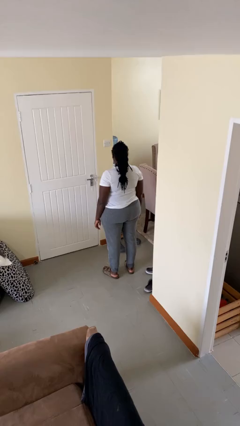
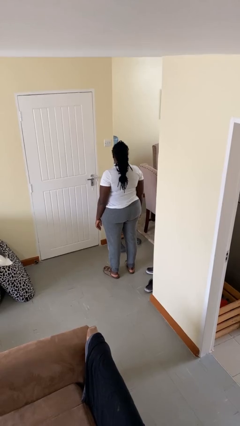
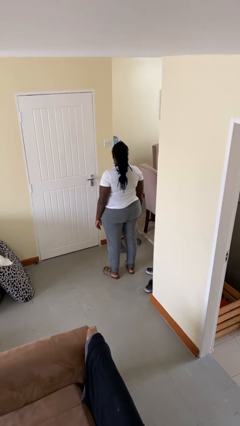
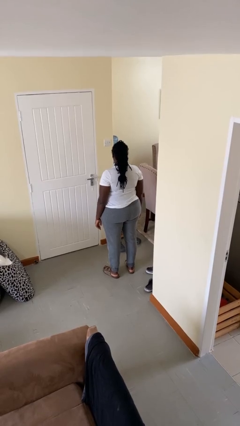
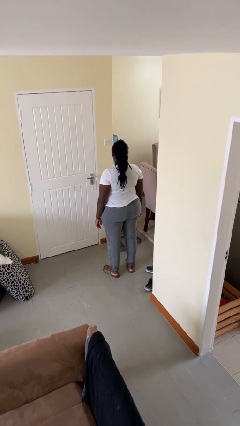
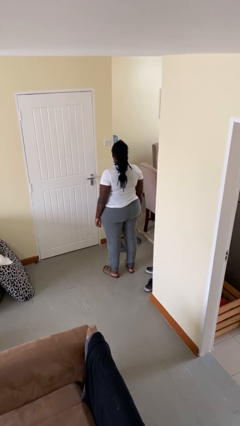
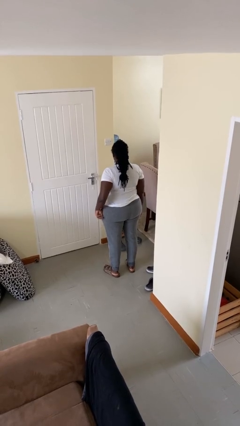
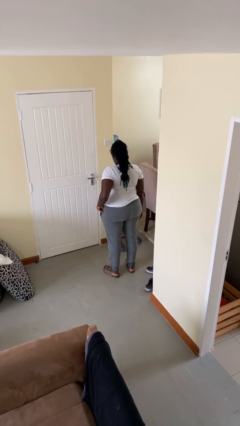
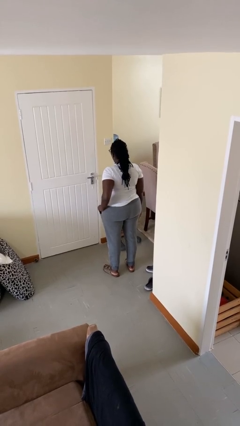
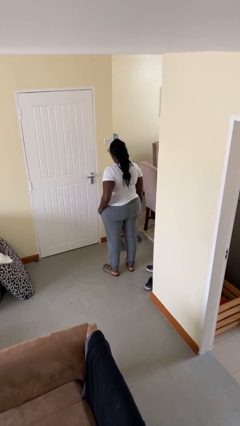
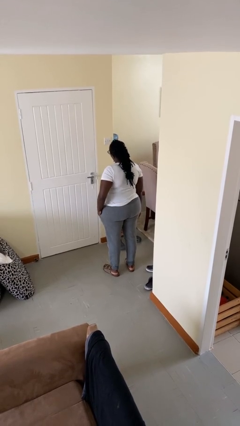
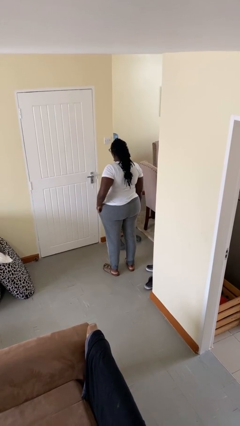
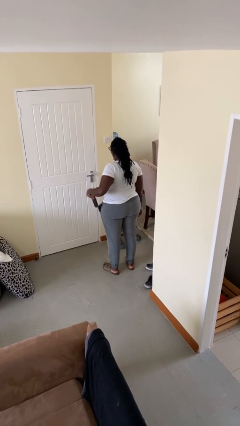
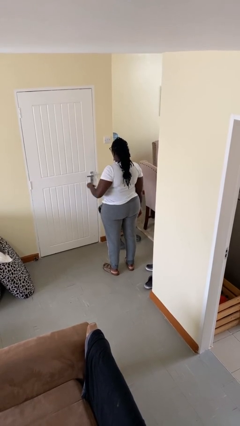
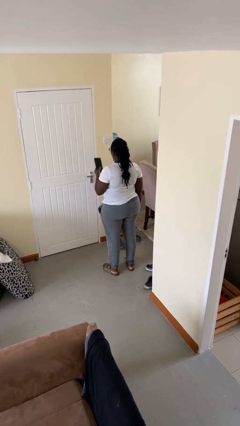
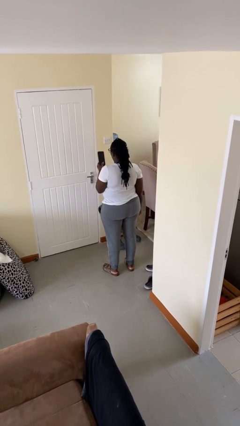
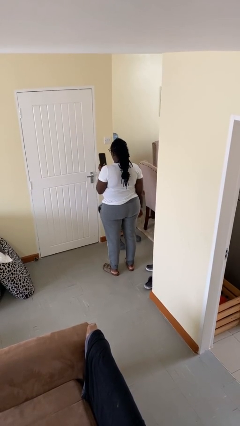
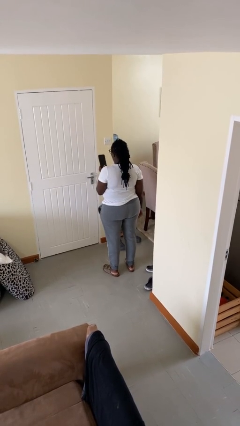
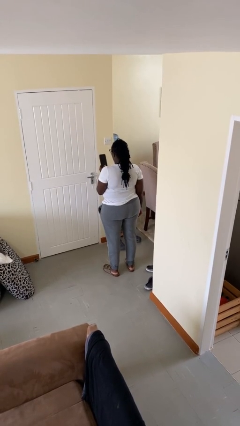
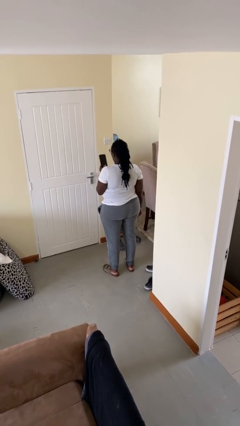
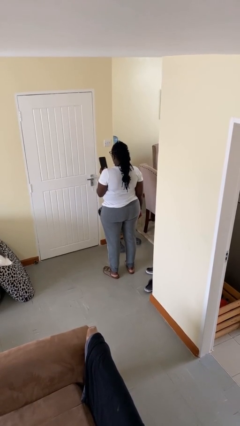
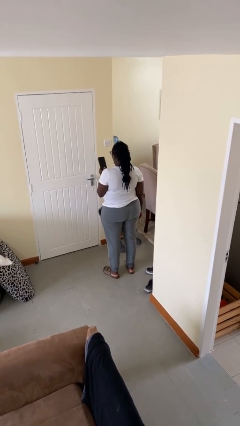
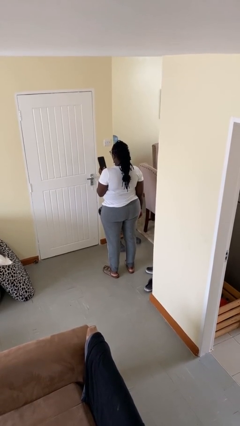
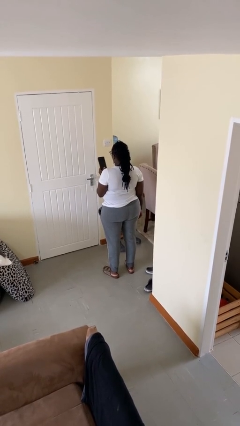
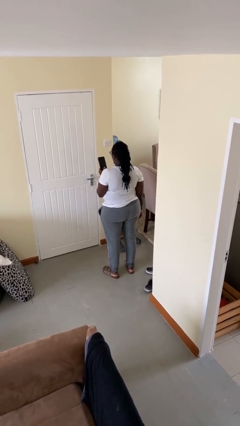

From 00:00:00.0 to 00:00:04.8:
person takes phone from pocket

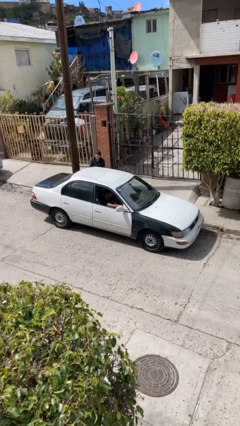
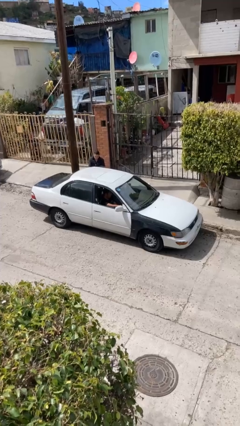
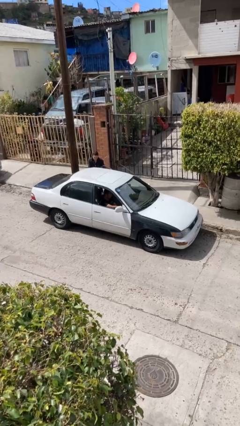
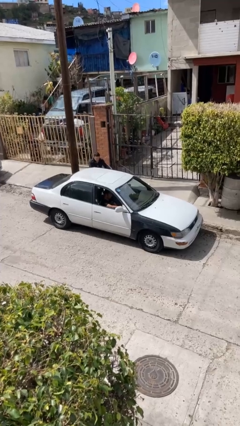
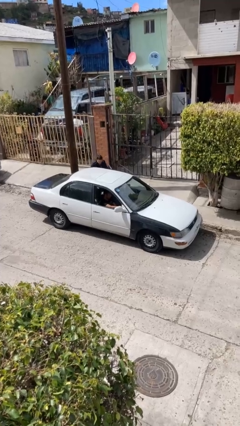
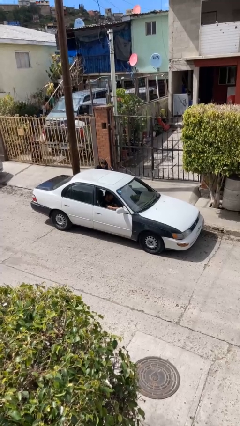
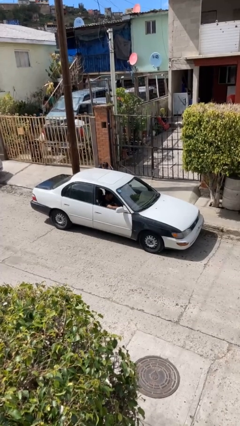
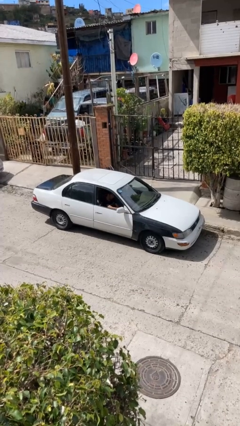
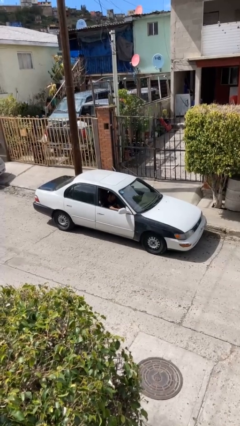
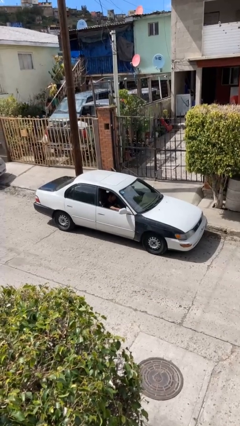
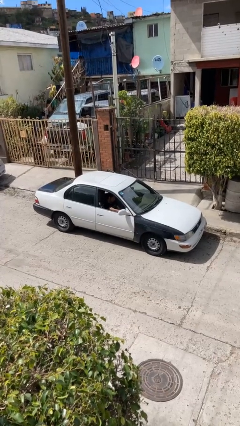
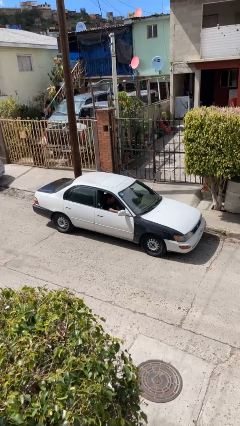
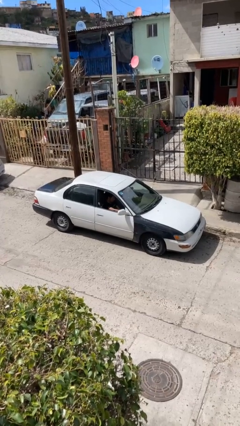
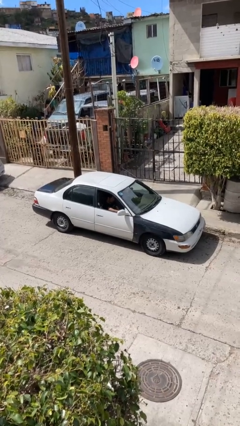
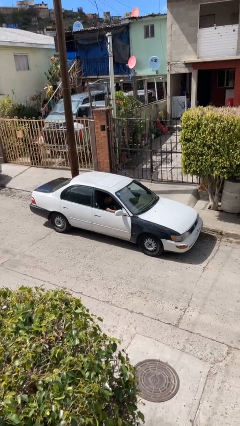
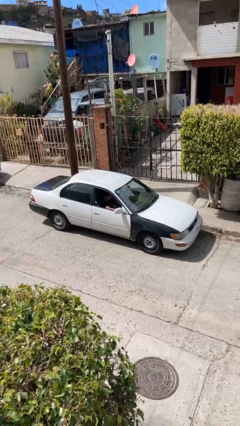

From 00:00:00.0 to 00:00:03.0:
car picks up person

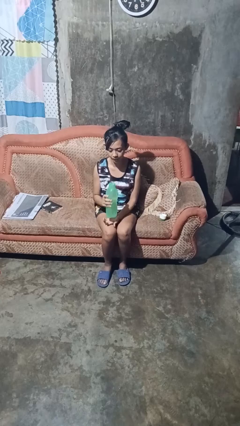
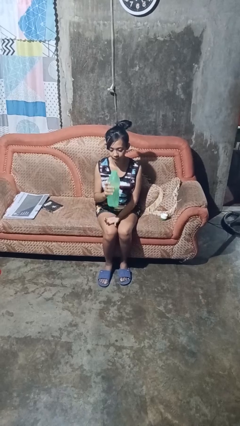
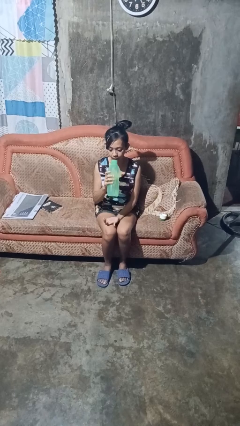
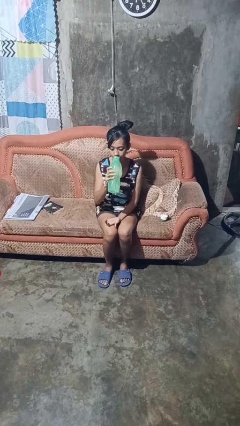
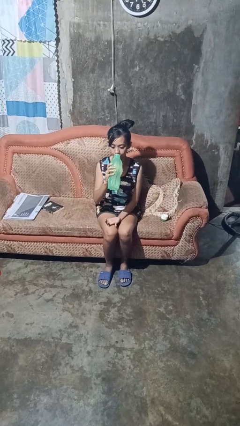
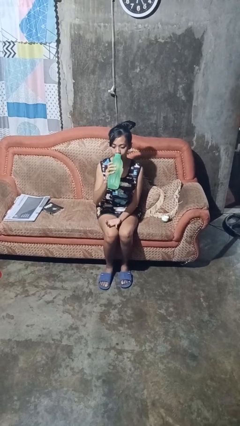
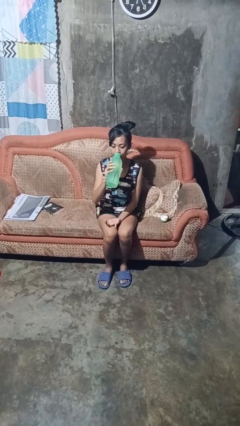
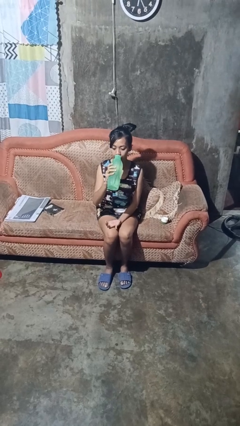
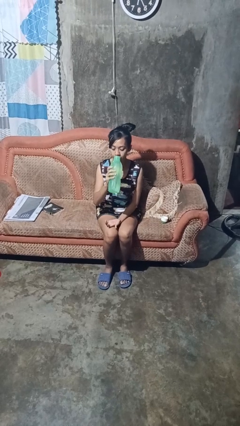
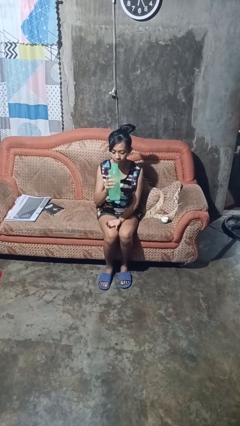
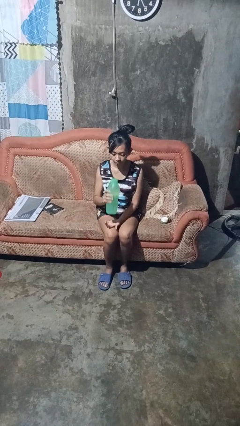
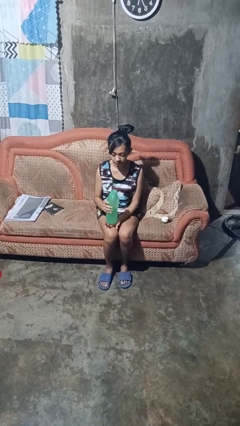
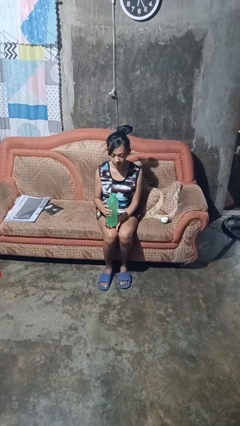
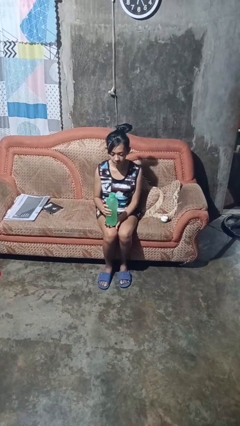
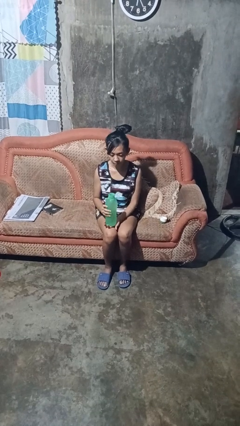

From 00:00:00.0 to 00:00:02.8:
person drinks from bottle

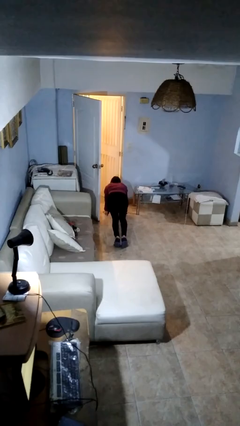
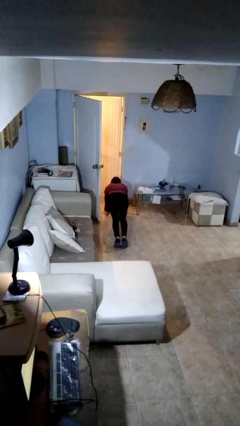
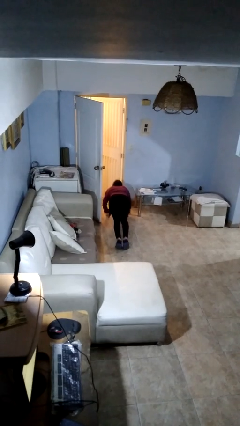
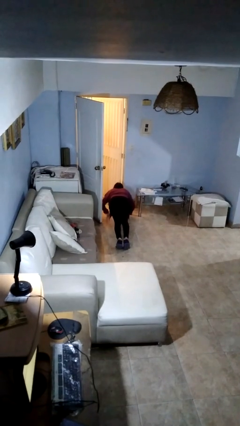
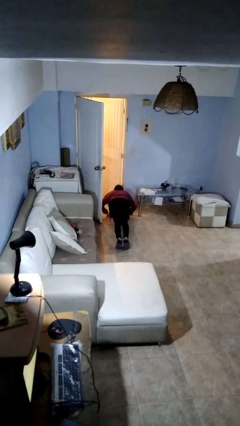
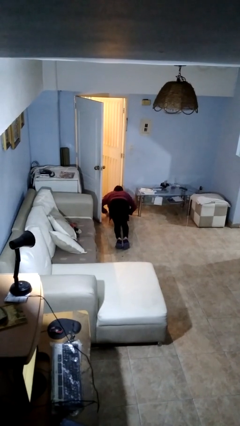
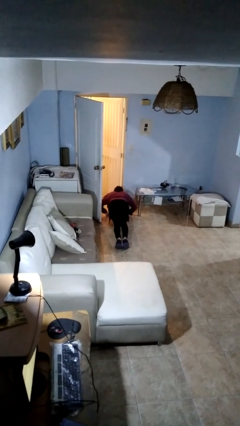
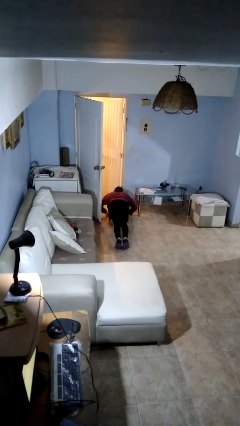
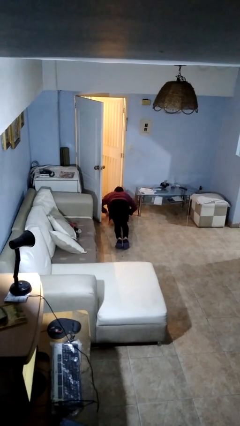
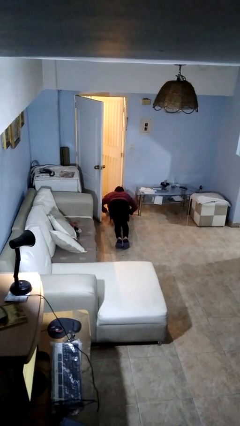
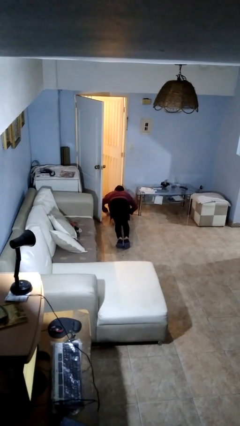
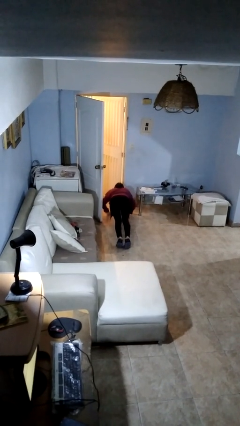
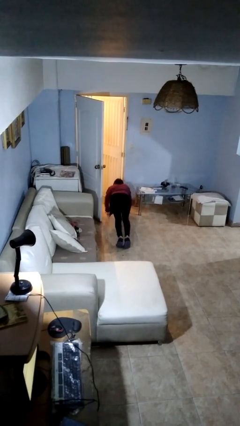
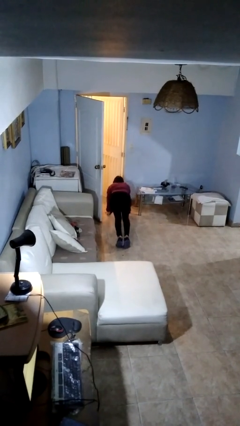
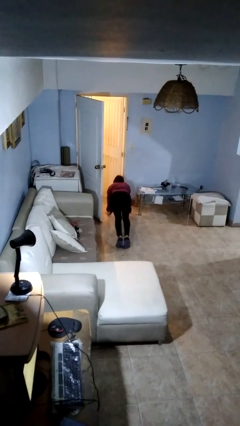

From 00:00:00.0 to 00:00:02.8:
person exercises with pushup

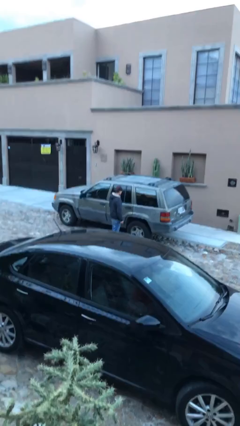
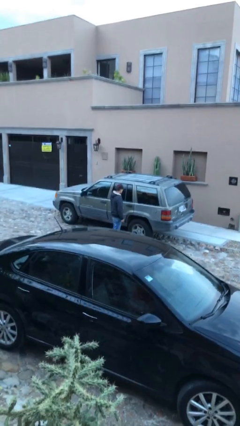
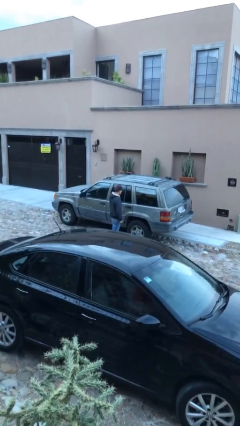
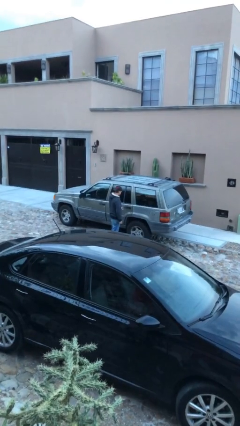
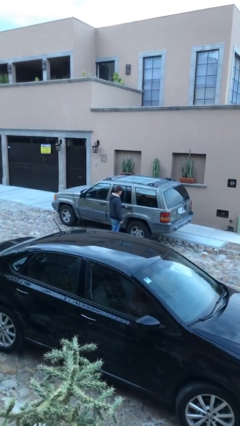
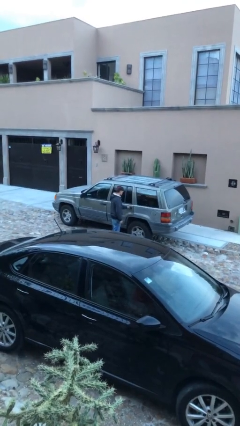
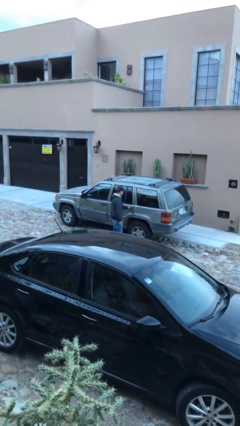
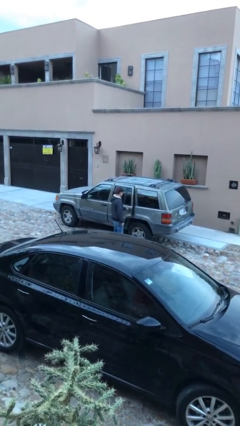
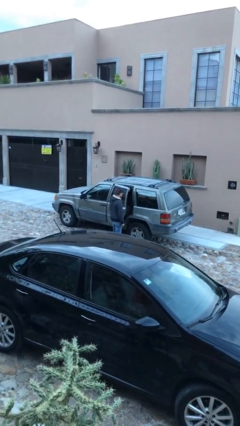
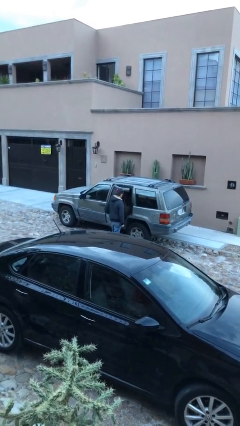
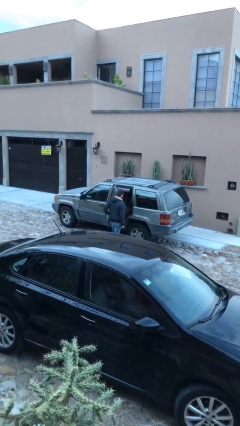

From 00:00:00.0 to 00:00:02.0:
person opens car door

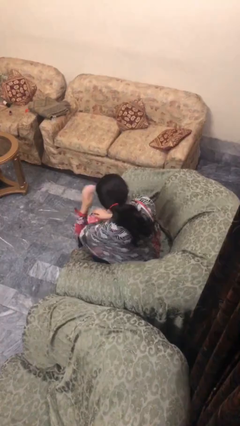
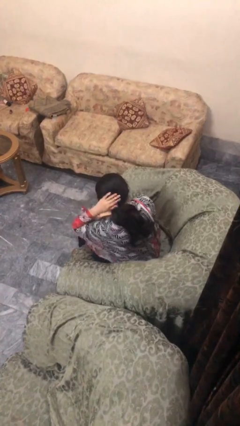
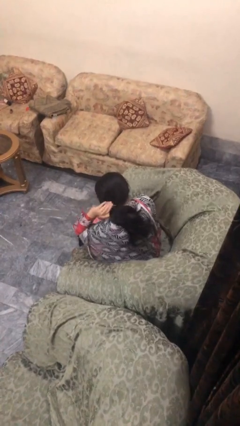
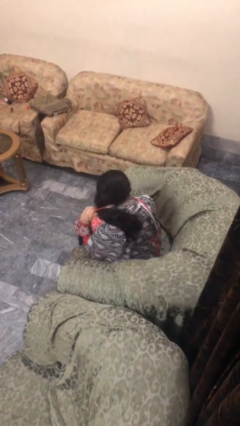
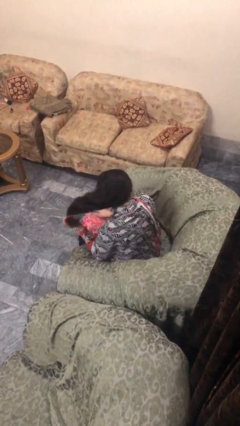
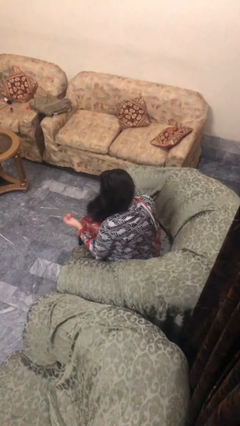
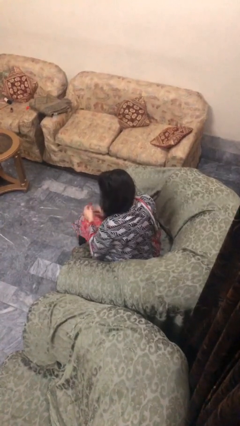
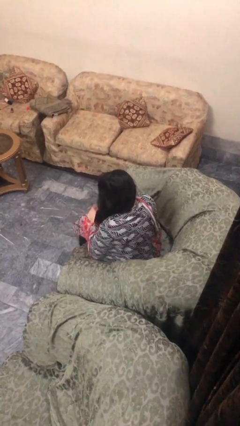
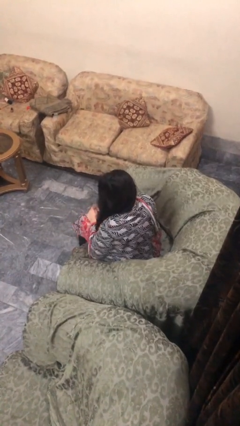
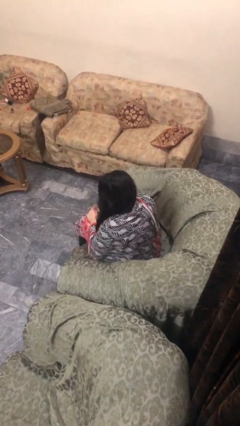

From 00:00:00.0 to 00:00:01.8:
person takes off hairtie
